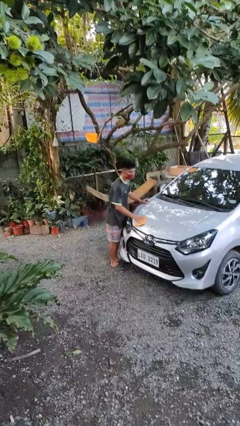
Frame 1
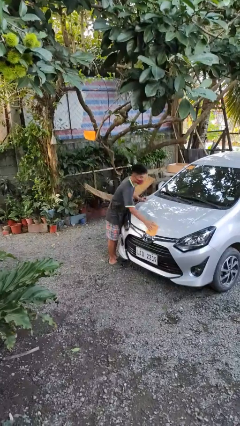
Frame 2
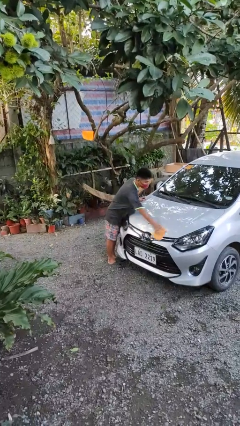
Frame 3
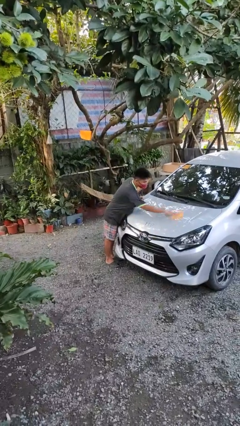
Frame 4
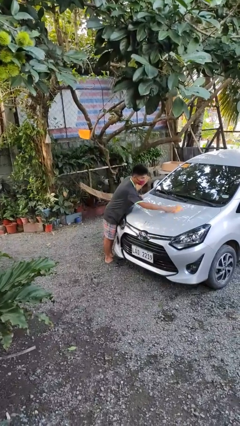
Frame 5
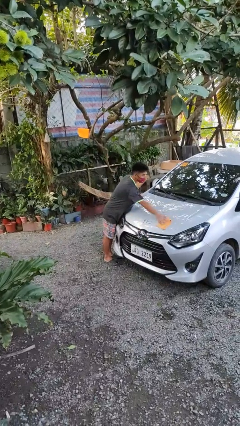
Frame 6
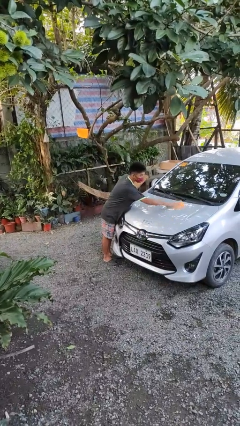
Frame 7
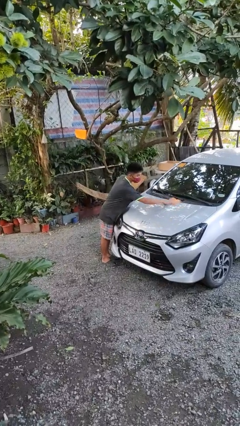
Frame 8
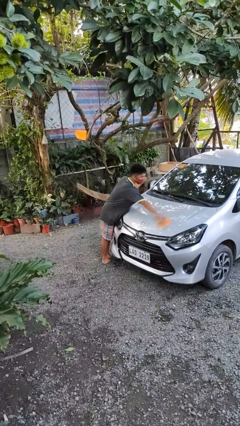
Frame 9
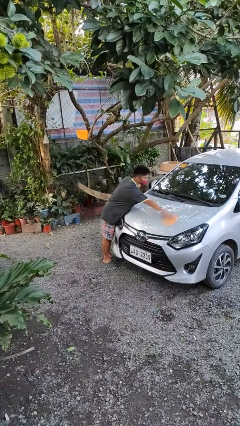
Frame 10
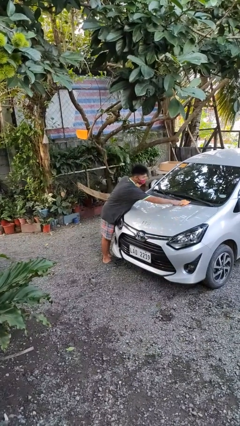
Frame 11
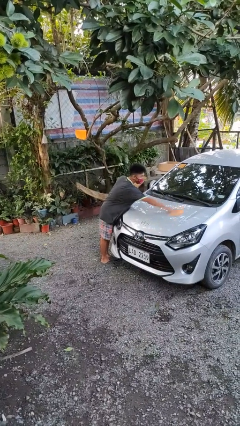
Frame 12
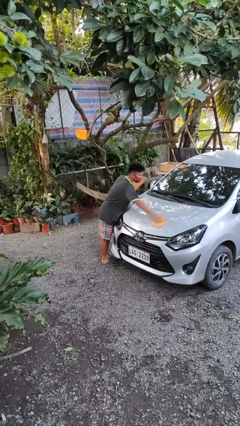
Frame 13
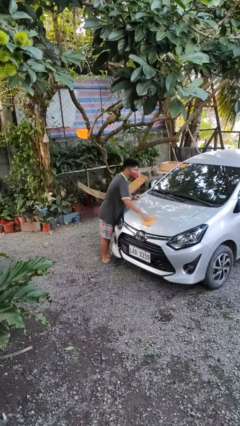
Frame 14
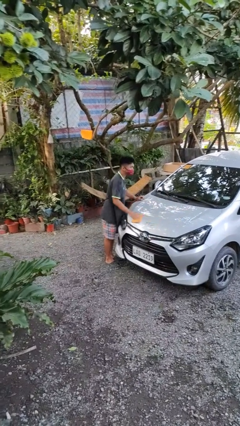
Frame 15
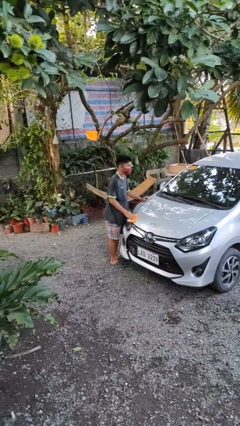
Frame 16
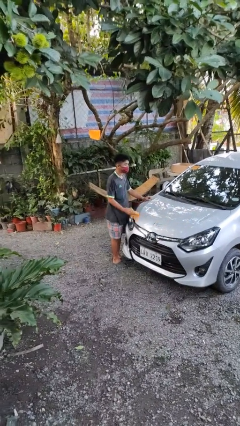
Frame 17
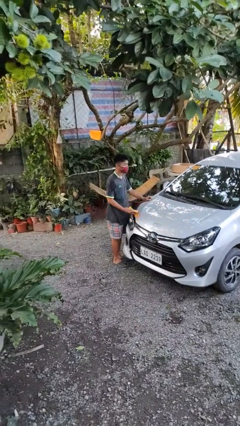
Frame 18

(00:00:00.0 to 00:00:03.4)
person polishes car with rag

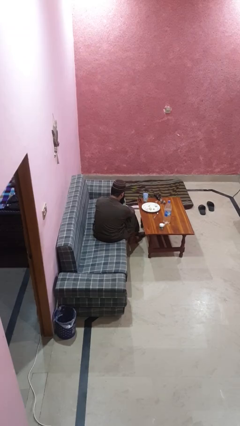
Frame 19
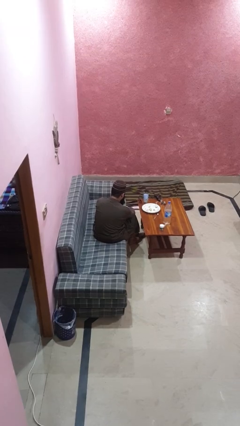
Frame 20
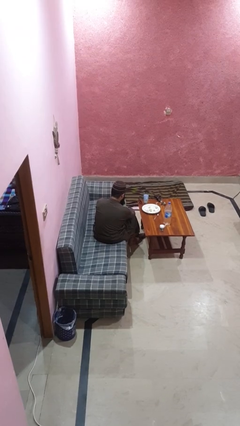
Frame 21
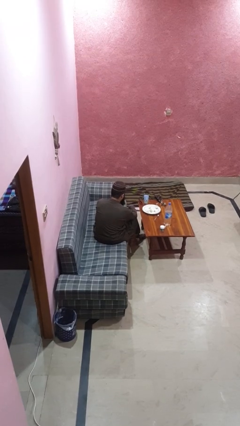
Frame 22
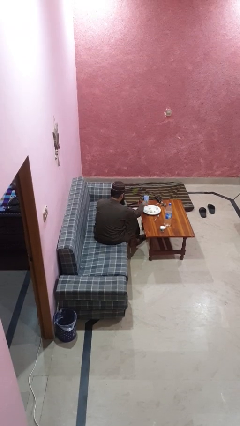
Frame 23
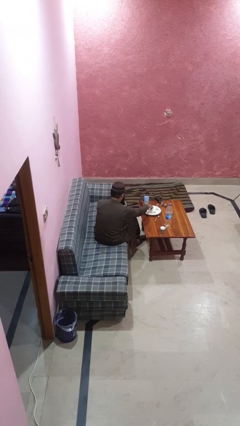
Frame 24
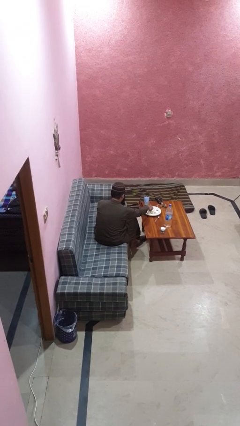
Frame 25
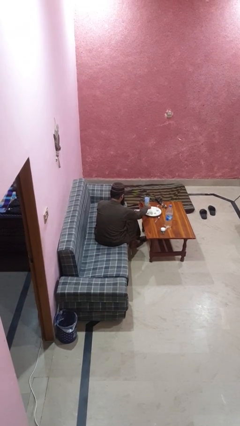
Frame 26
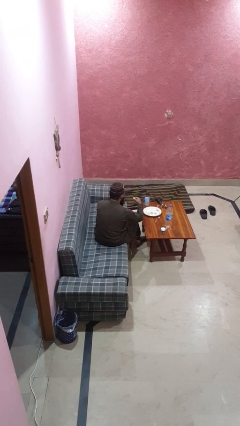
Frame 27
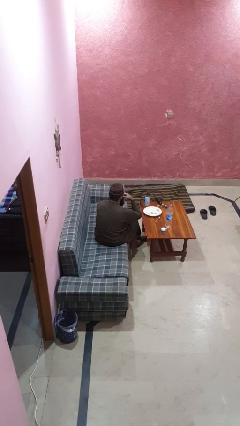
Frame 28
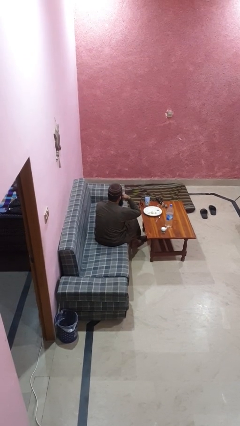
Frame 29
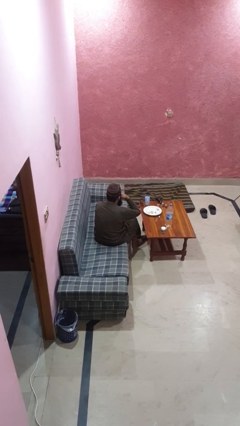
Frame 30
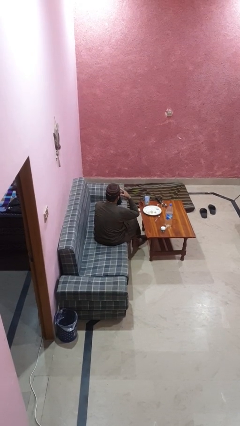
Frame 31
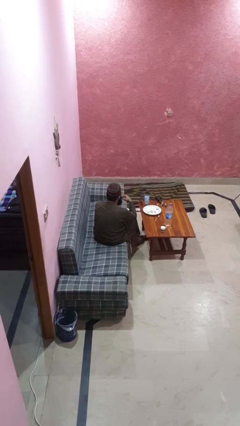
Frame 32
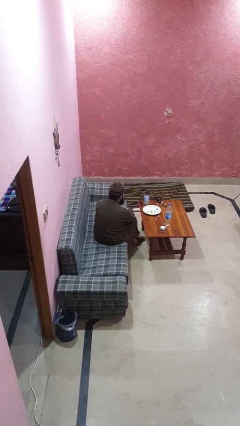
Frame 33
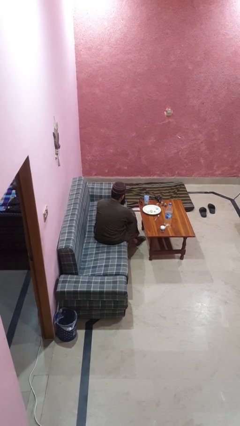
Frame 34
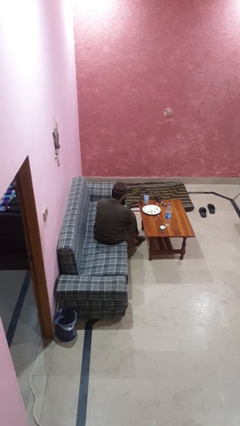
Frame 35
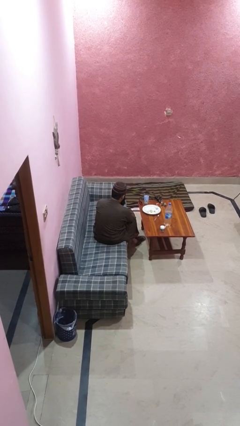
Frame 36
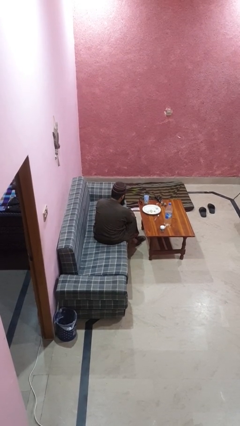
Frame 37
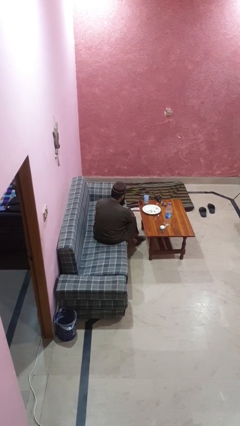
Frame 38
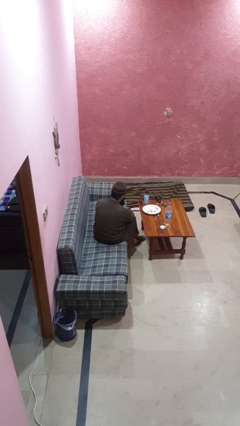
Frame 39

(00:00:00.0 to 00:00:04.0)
person eats with hands

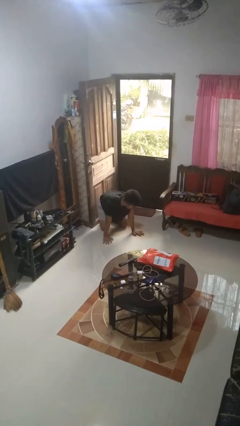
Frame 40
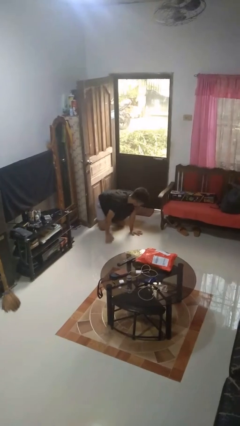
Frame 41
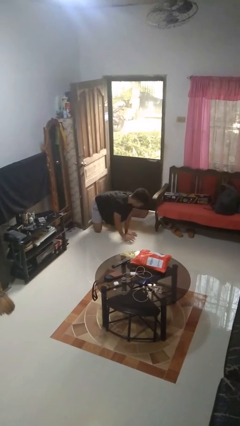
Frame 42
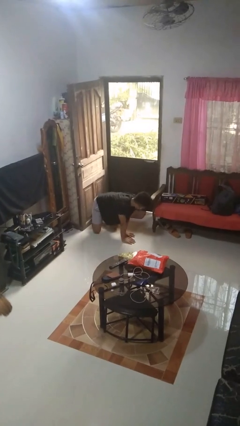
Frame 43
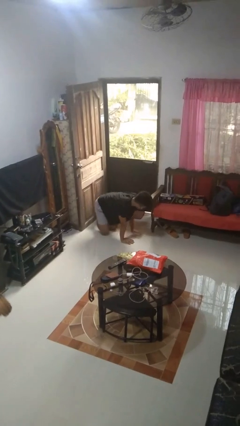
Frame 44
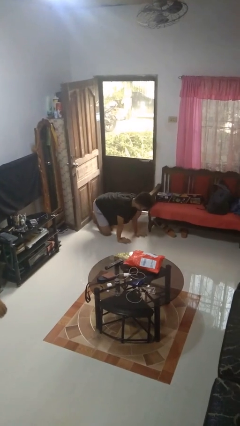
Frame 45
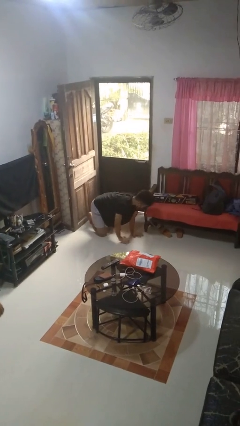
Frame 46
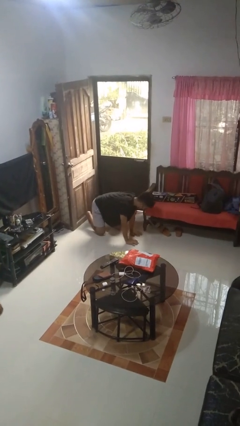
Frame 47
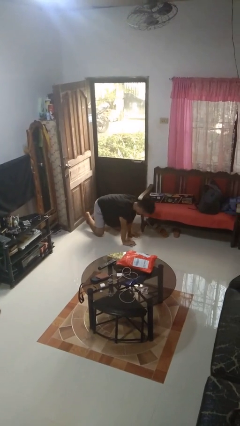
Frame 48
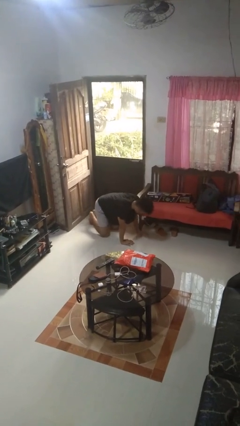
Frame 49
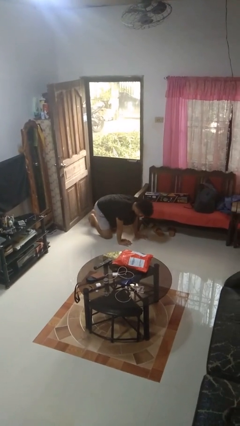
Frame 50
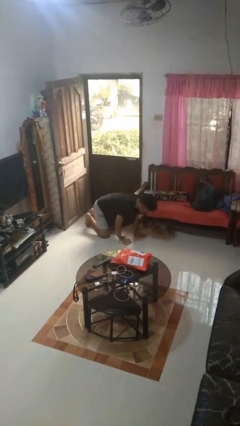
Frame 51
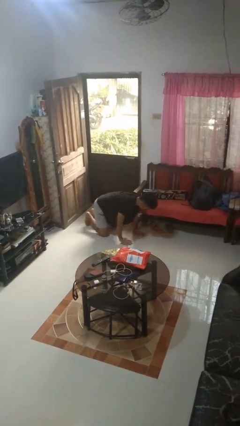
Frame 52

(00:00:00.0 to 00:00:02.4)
person crawls

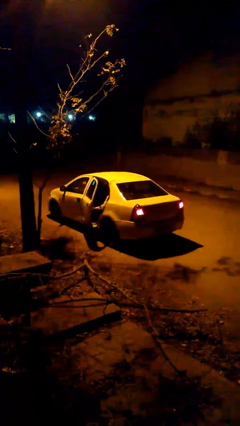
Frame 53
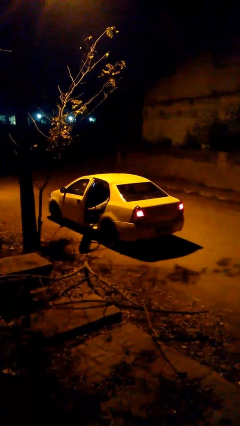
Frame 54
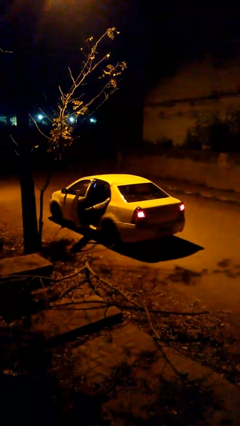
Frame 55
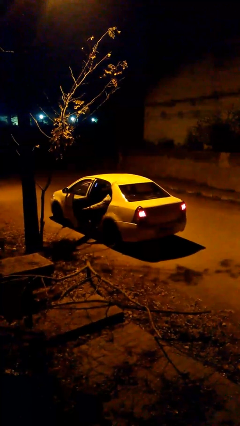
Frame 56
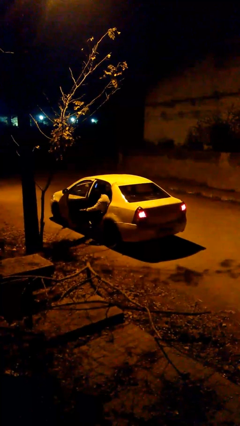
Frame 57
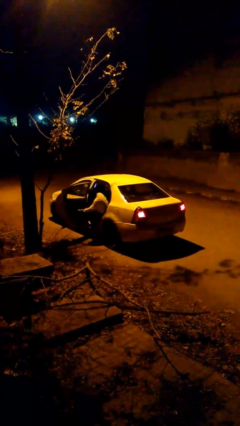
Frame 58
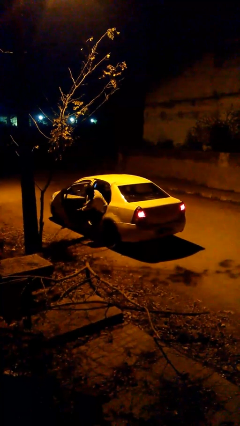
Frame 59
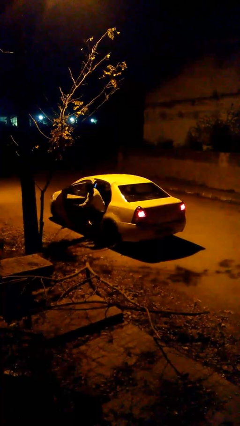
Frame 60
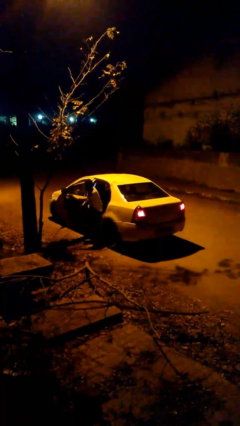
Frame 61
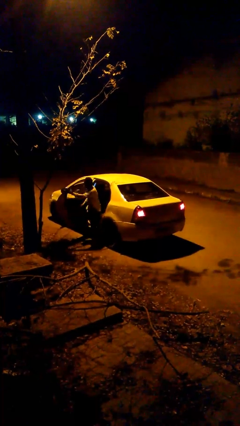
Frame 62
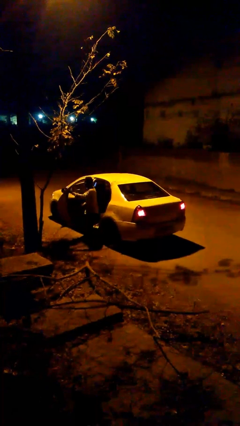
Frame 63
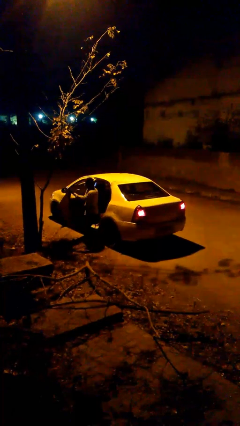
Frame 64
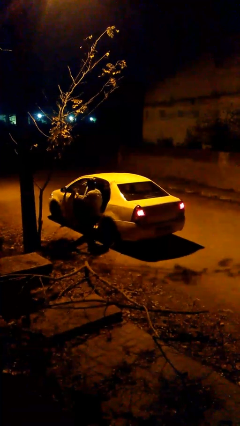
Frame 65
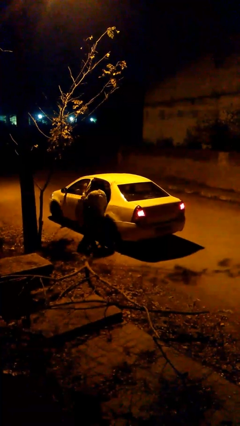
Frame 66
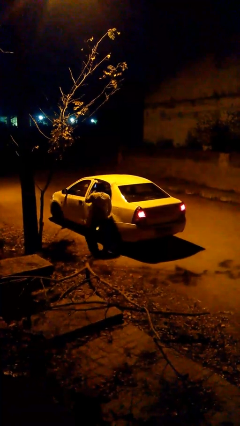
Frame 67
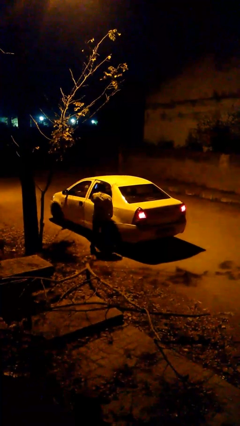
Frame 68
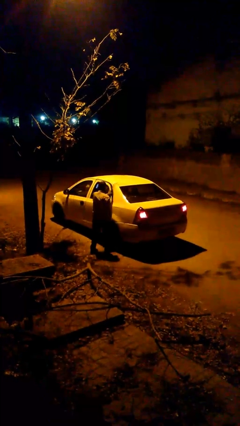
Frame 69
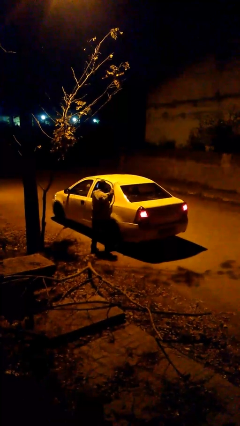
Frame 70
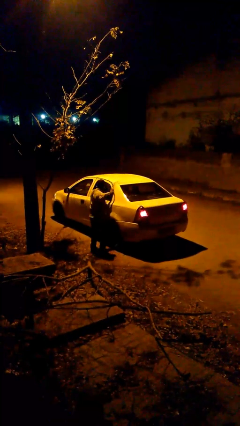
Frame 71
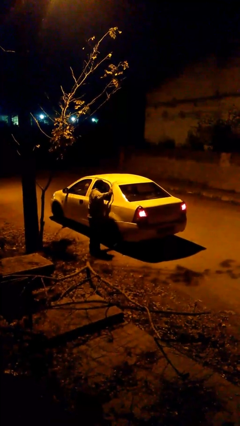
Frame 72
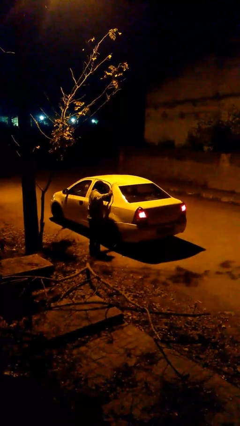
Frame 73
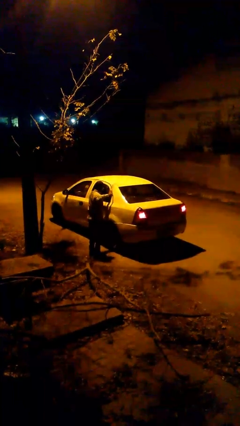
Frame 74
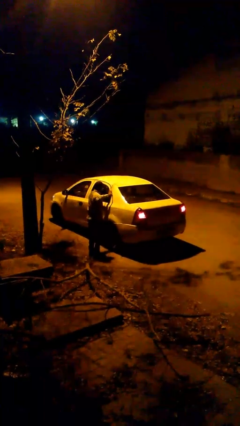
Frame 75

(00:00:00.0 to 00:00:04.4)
car drops off person

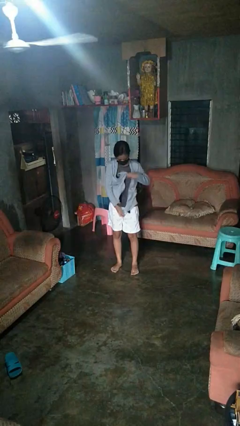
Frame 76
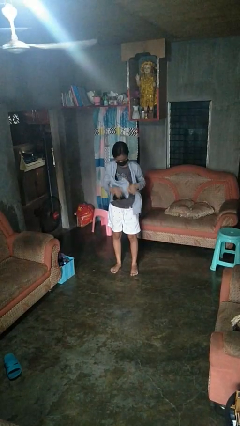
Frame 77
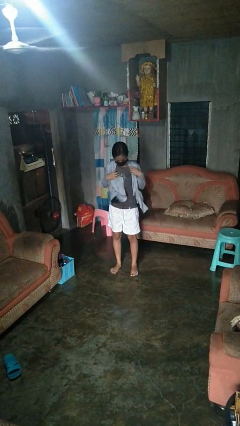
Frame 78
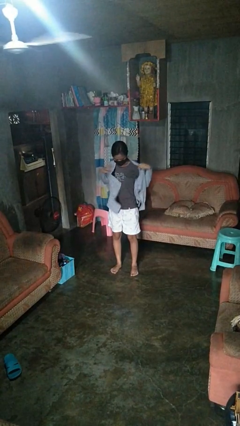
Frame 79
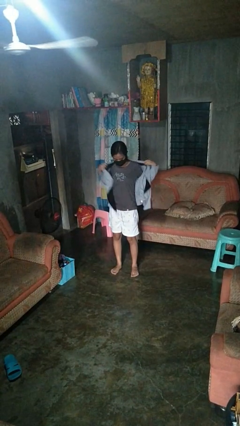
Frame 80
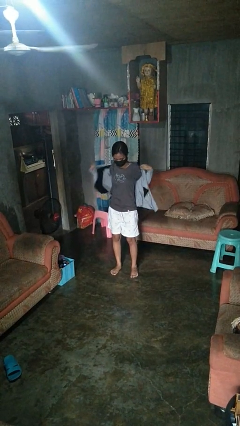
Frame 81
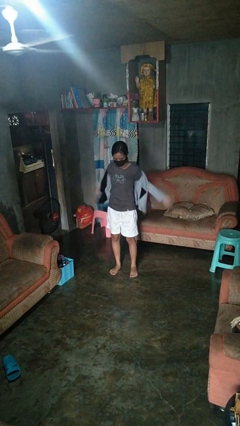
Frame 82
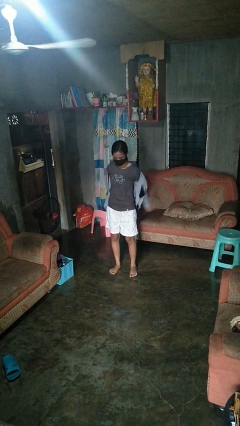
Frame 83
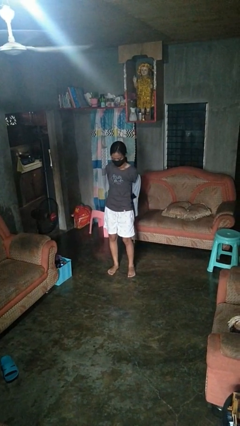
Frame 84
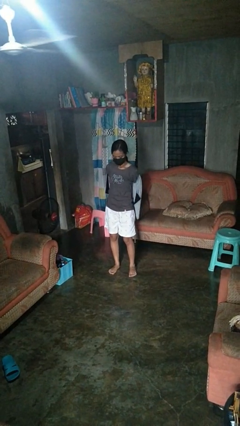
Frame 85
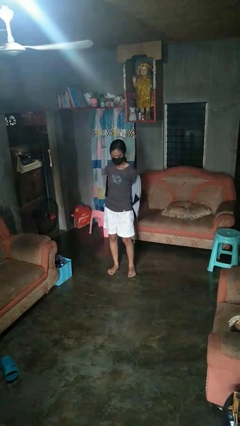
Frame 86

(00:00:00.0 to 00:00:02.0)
person takes off jacket

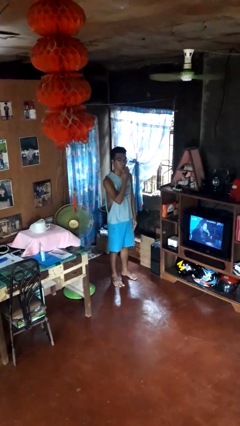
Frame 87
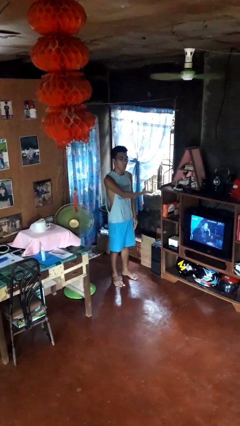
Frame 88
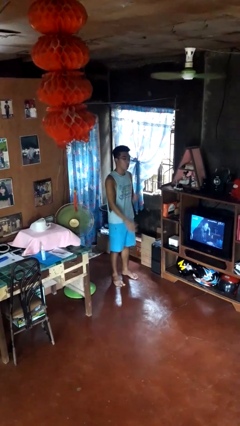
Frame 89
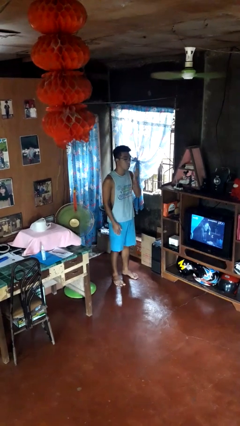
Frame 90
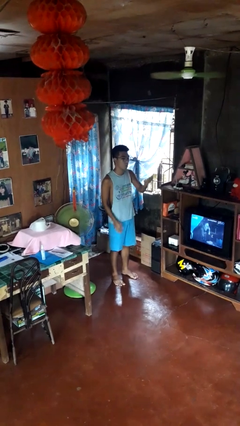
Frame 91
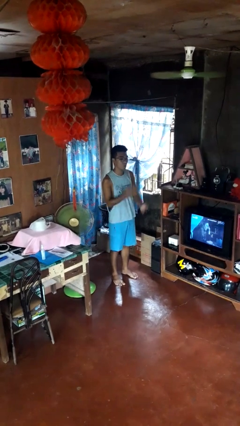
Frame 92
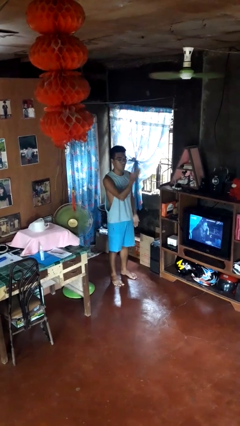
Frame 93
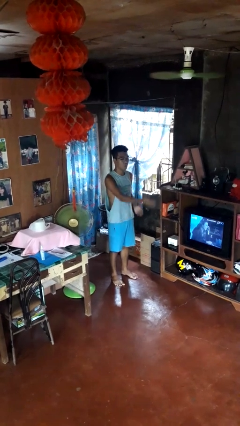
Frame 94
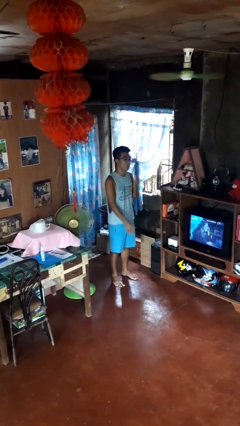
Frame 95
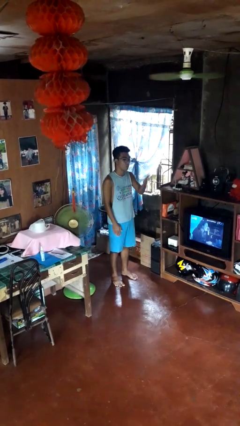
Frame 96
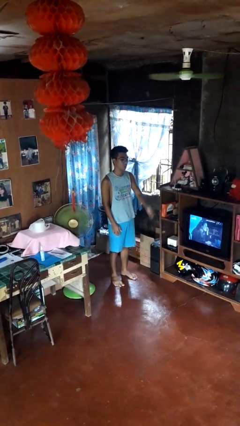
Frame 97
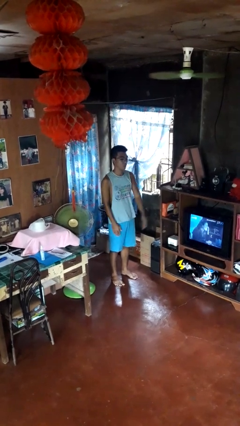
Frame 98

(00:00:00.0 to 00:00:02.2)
person gestures blow kiss
